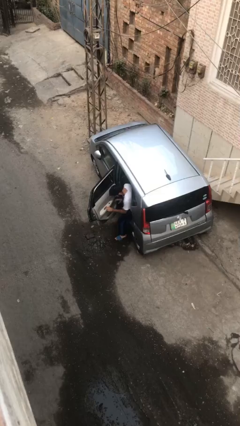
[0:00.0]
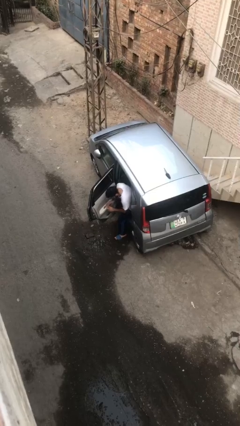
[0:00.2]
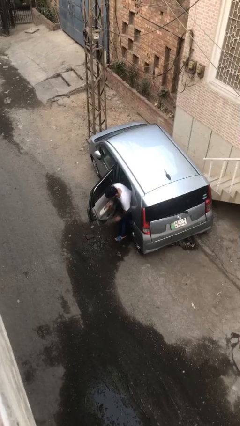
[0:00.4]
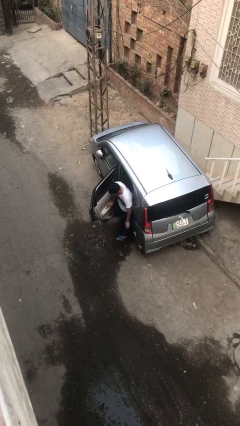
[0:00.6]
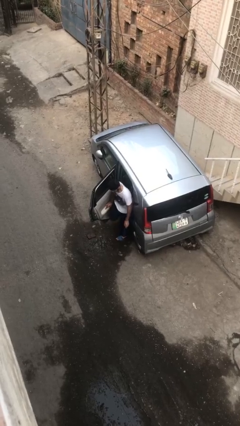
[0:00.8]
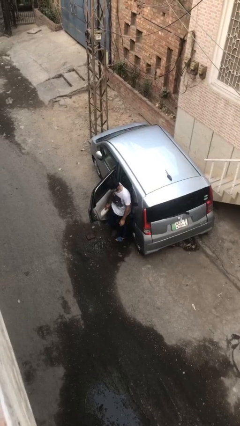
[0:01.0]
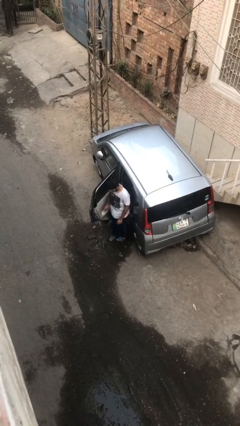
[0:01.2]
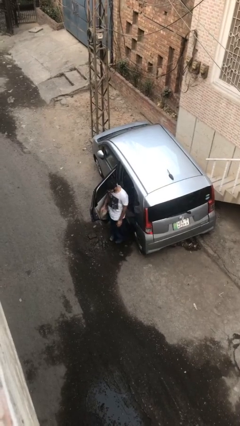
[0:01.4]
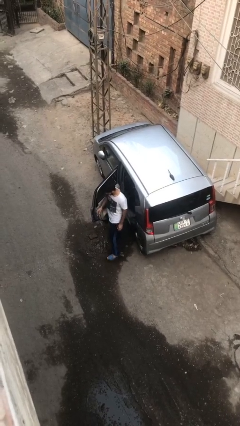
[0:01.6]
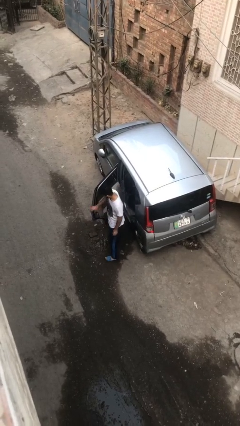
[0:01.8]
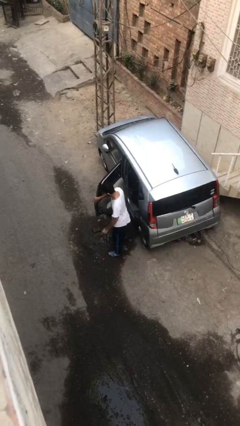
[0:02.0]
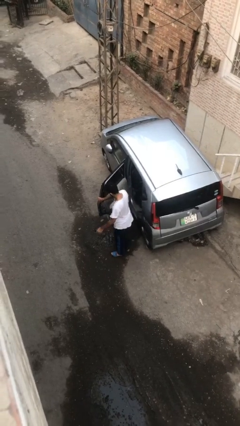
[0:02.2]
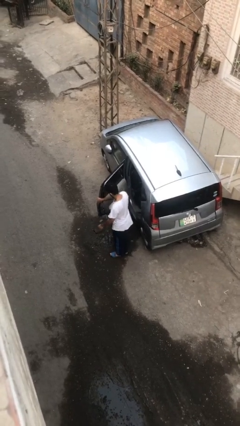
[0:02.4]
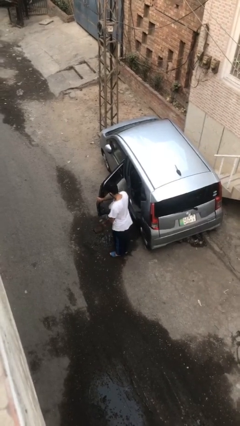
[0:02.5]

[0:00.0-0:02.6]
person exits car

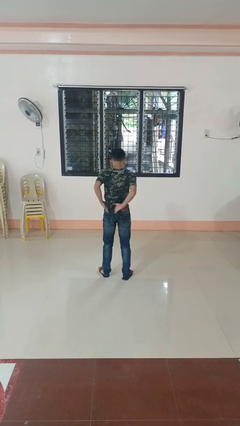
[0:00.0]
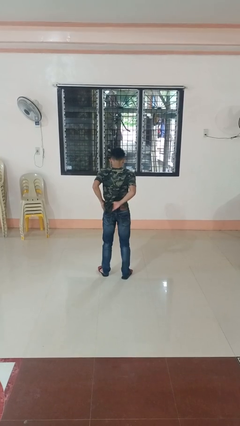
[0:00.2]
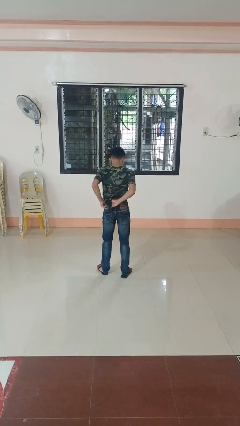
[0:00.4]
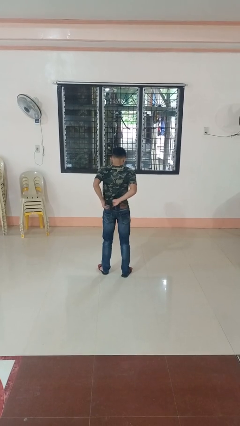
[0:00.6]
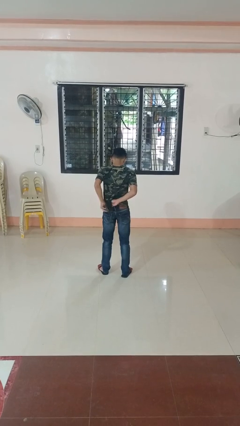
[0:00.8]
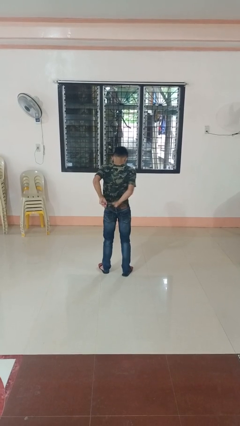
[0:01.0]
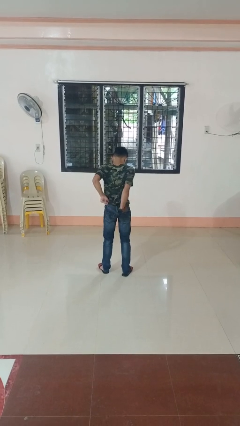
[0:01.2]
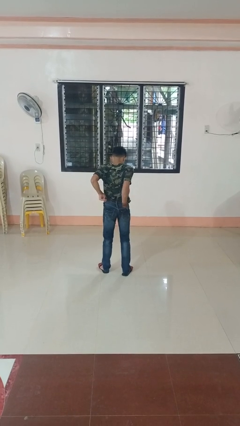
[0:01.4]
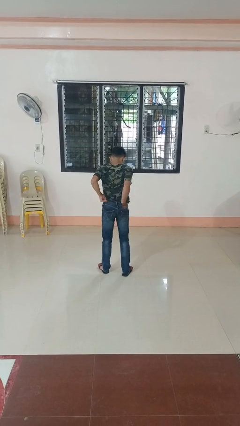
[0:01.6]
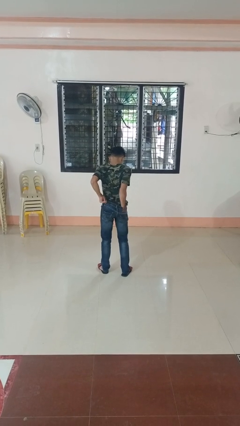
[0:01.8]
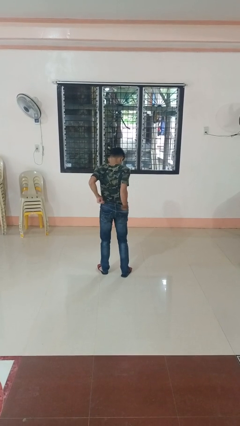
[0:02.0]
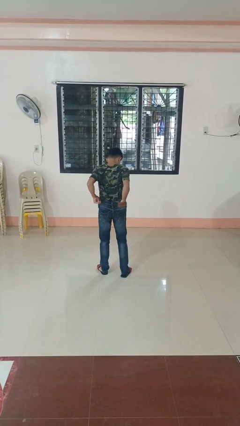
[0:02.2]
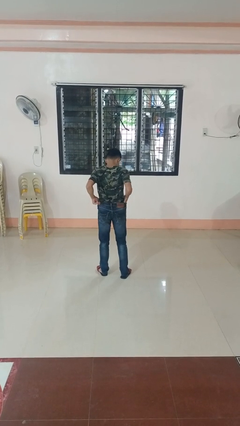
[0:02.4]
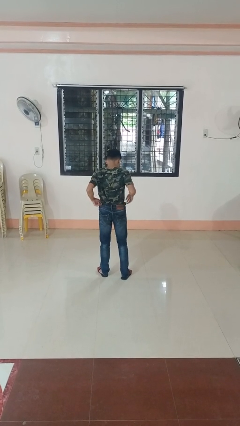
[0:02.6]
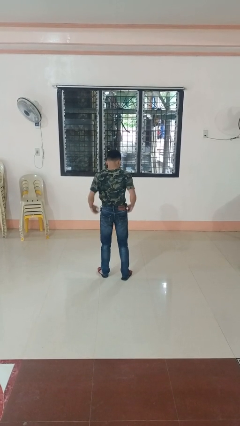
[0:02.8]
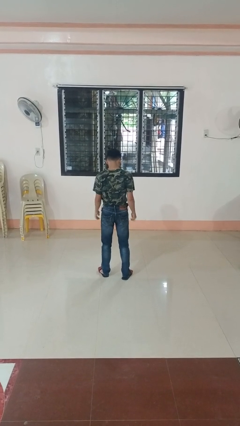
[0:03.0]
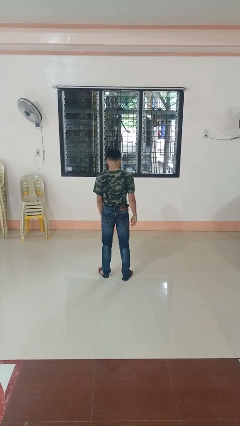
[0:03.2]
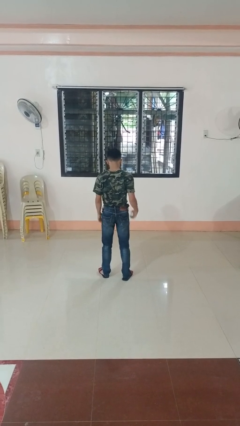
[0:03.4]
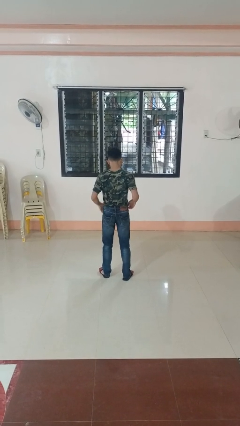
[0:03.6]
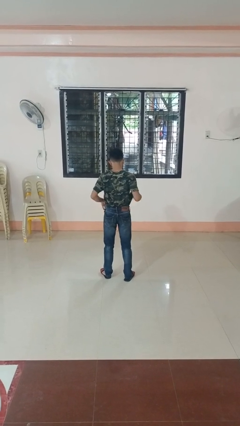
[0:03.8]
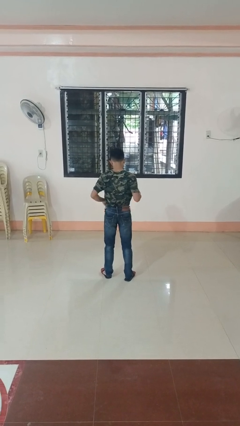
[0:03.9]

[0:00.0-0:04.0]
person tucks in shirt

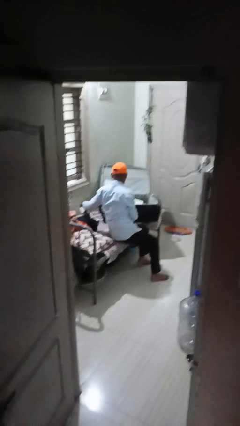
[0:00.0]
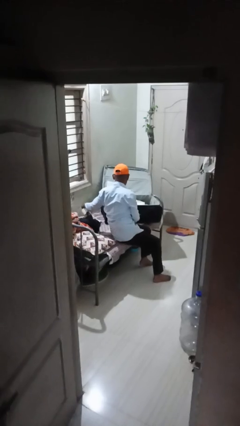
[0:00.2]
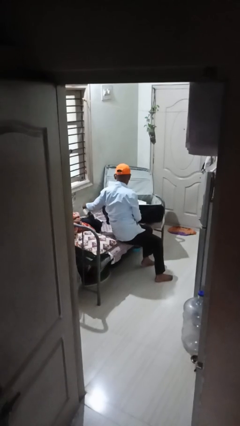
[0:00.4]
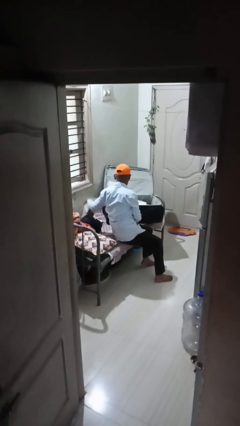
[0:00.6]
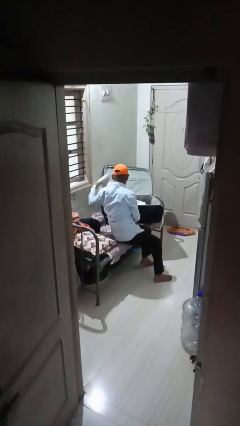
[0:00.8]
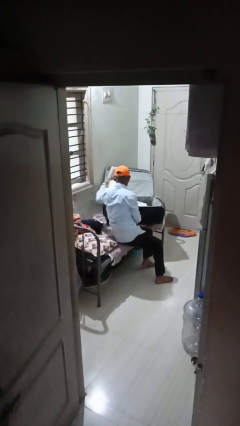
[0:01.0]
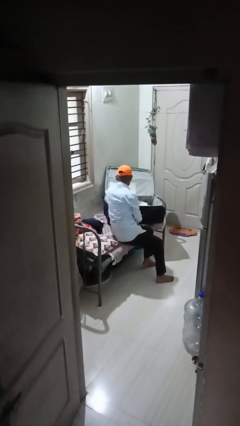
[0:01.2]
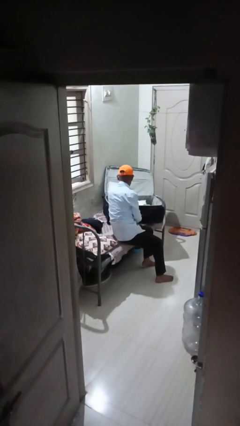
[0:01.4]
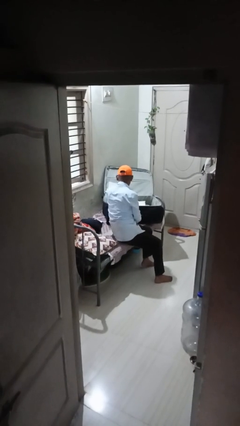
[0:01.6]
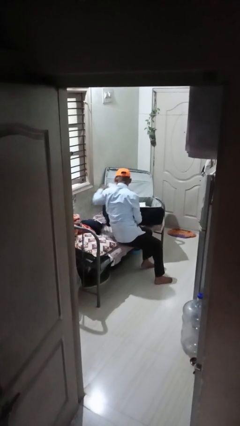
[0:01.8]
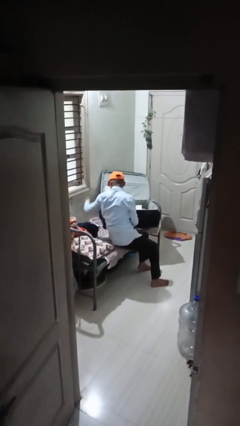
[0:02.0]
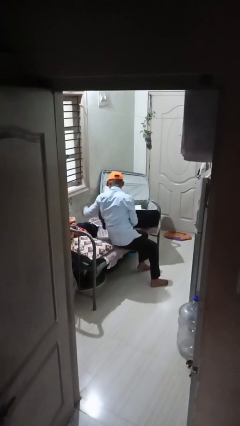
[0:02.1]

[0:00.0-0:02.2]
person loads clothes into suitcase

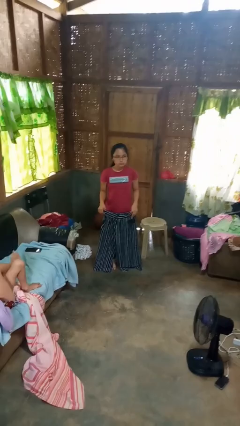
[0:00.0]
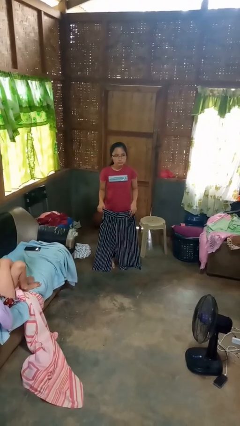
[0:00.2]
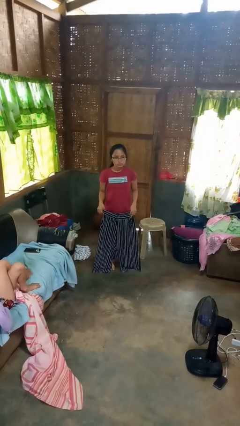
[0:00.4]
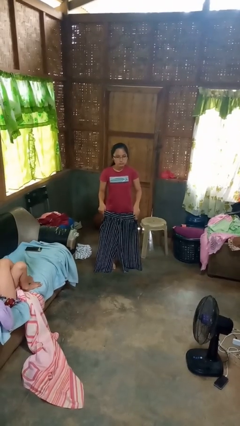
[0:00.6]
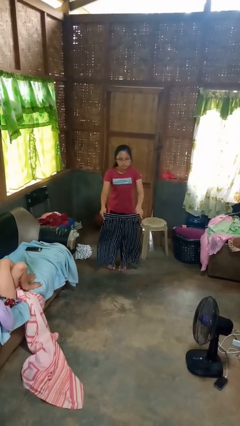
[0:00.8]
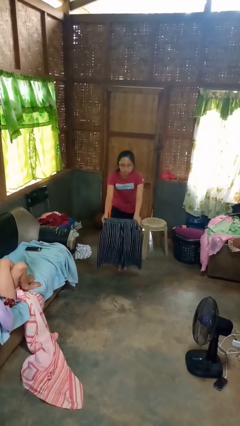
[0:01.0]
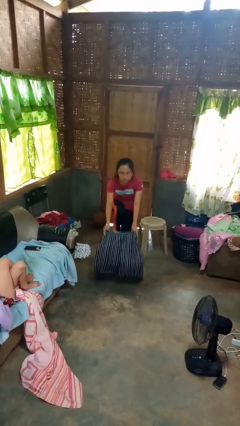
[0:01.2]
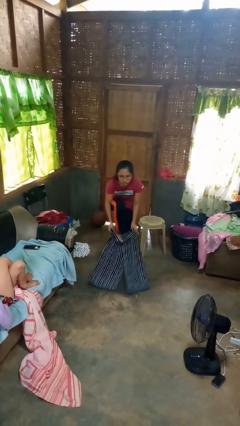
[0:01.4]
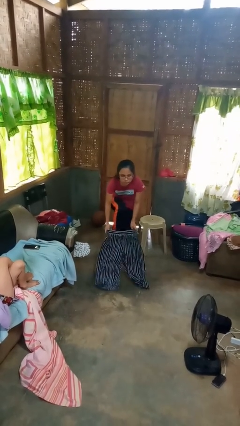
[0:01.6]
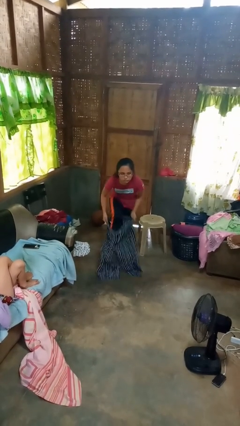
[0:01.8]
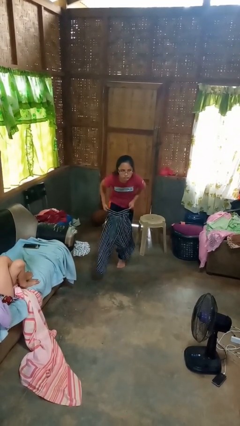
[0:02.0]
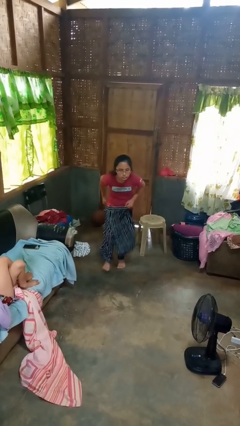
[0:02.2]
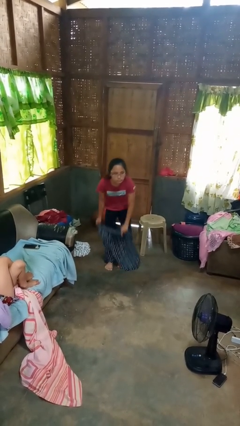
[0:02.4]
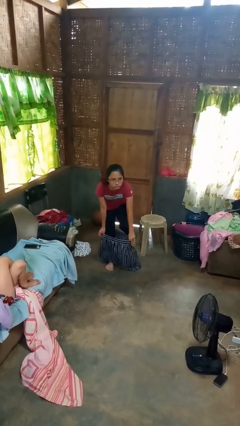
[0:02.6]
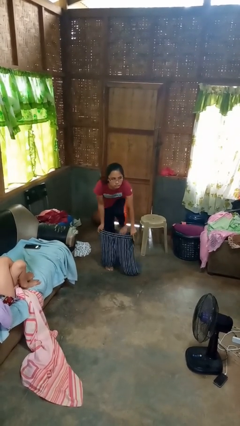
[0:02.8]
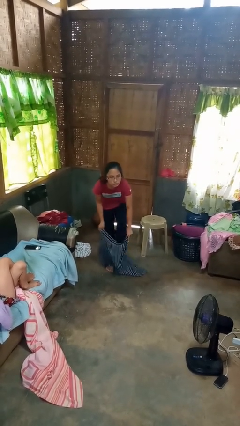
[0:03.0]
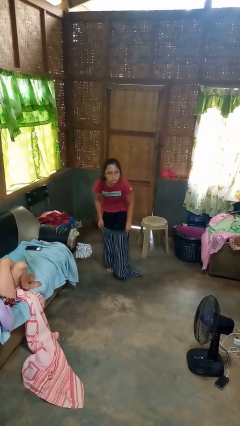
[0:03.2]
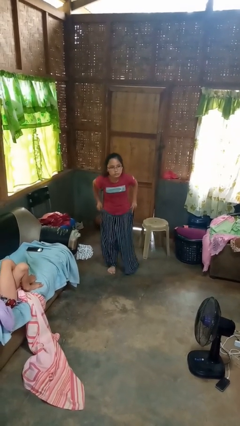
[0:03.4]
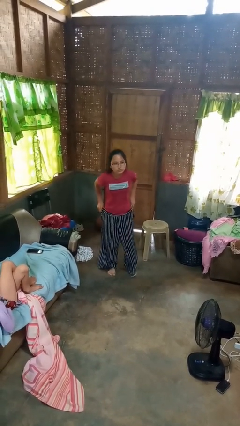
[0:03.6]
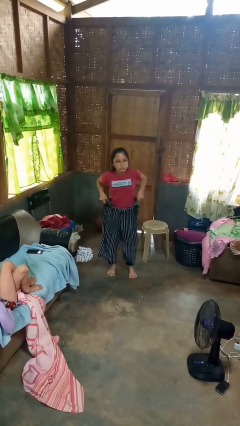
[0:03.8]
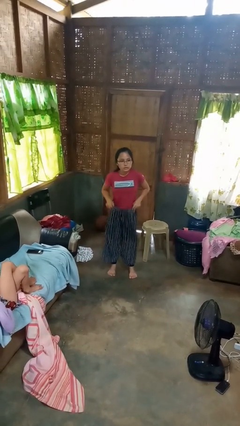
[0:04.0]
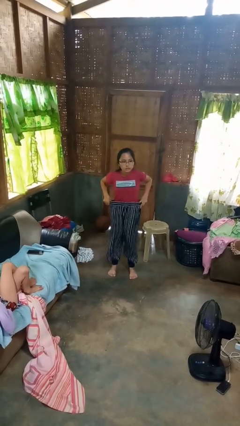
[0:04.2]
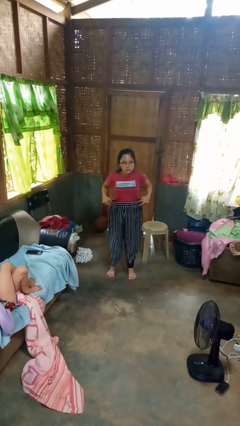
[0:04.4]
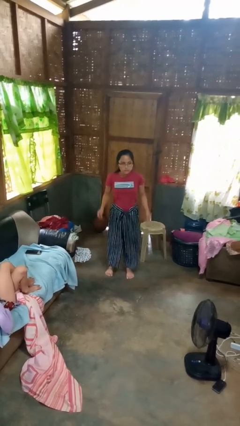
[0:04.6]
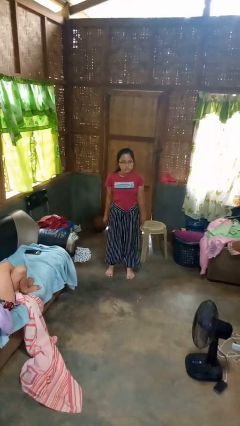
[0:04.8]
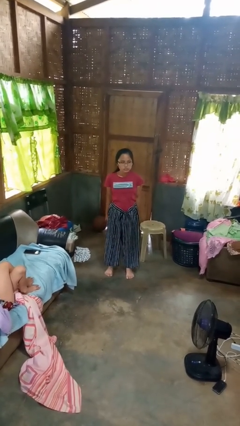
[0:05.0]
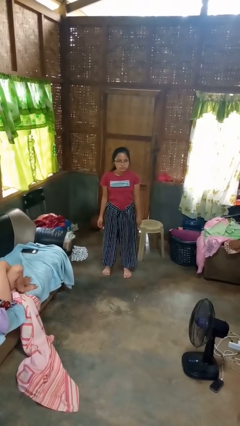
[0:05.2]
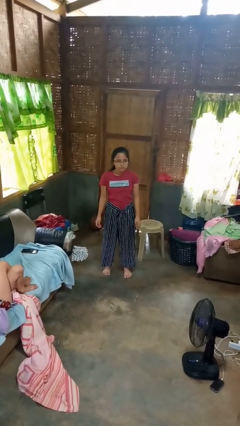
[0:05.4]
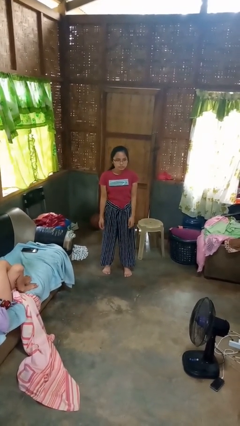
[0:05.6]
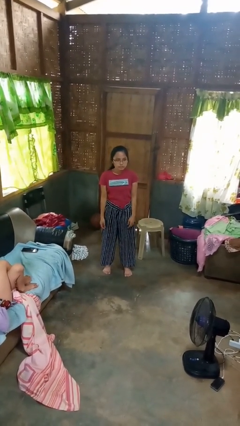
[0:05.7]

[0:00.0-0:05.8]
person puts on pants

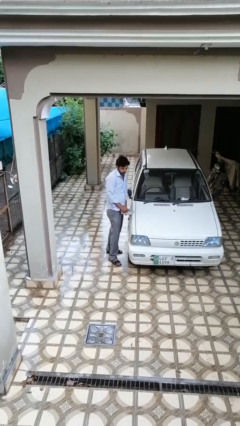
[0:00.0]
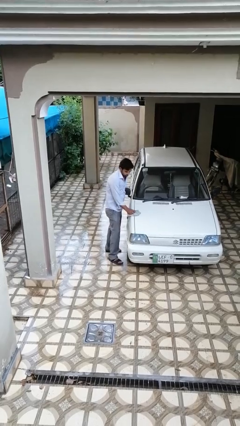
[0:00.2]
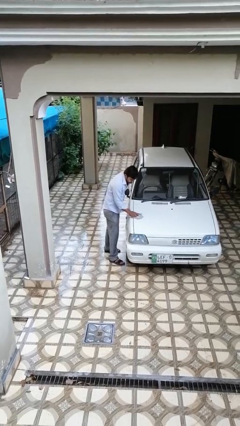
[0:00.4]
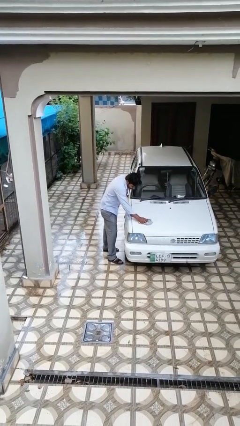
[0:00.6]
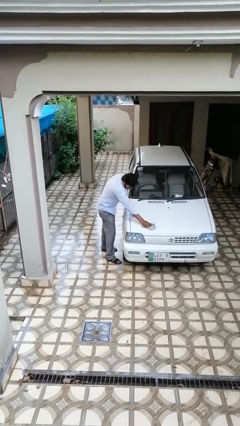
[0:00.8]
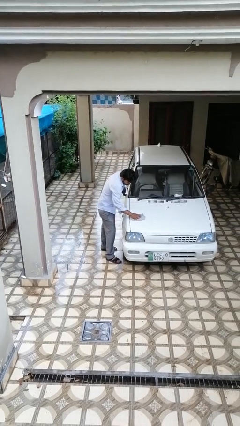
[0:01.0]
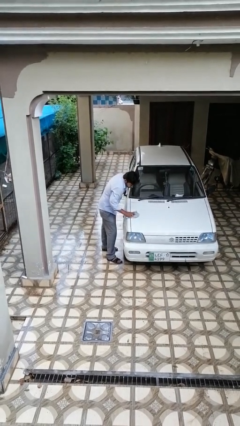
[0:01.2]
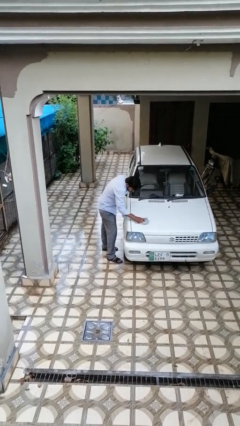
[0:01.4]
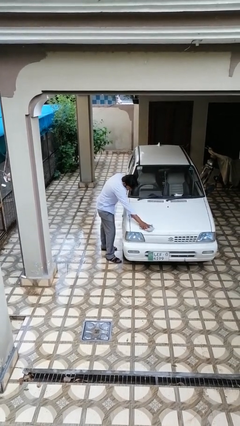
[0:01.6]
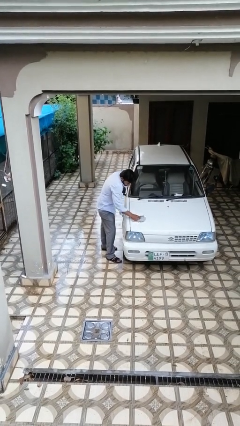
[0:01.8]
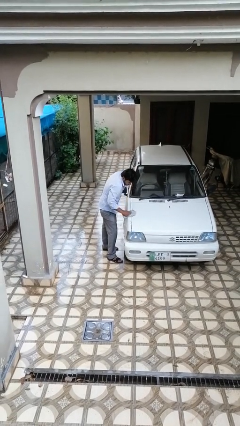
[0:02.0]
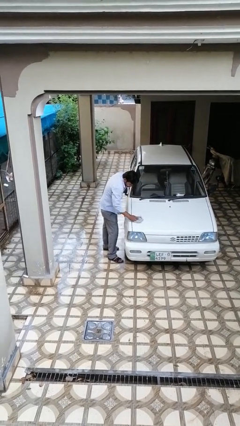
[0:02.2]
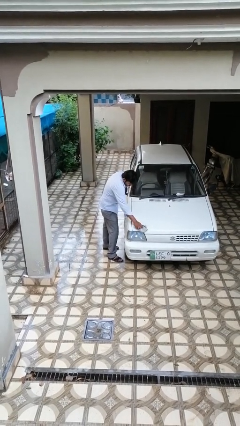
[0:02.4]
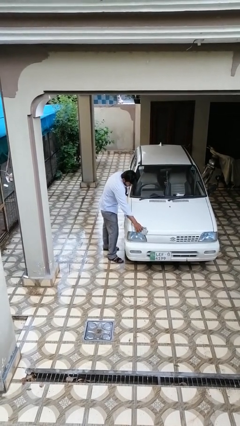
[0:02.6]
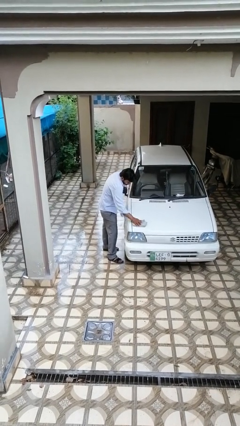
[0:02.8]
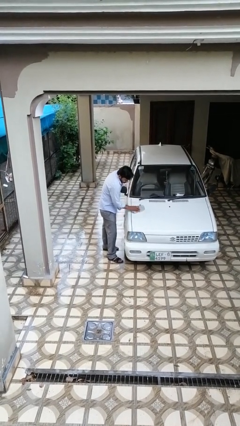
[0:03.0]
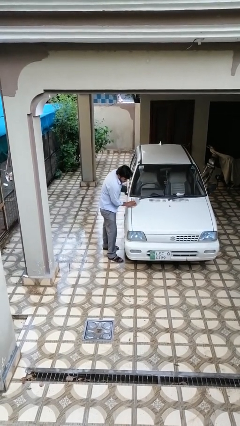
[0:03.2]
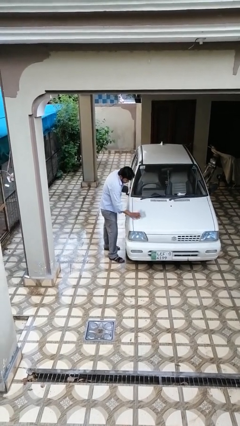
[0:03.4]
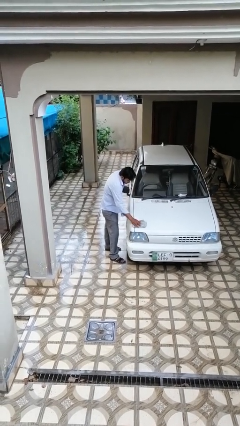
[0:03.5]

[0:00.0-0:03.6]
person polishes car with rag
